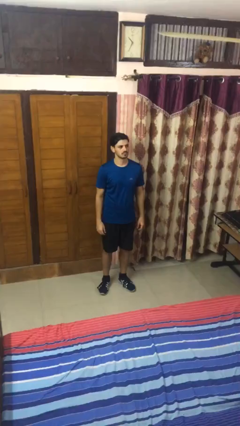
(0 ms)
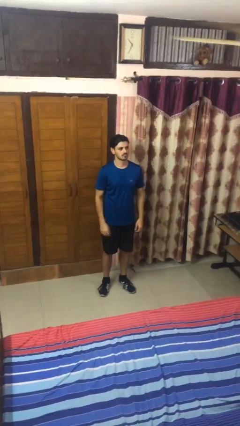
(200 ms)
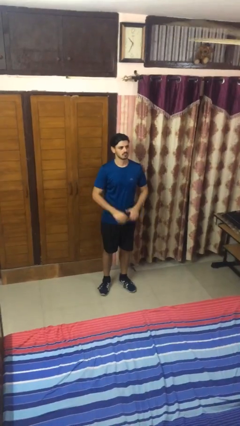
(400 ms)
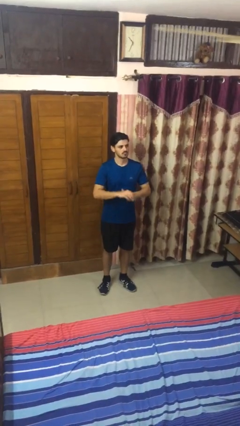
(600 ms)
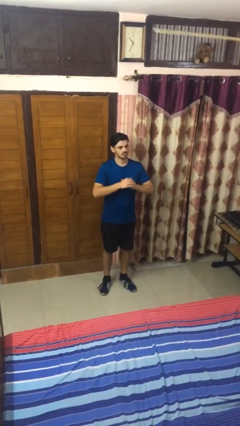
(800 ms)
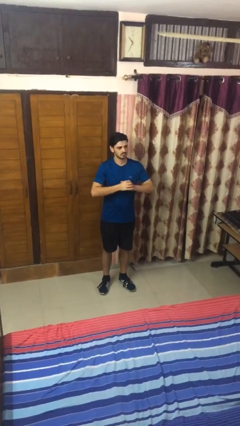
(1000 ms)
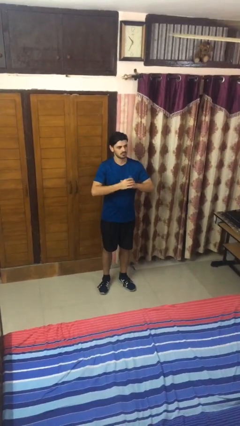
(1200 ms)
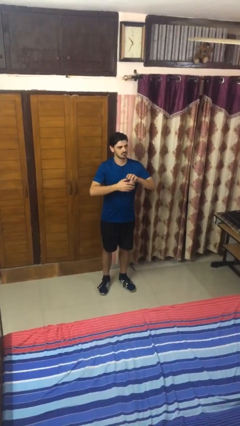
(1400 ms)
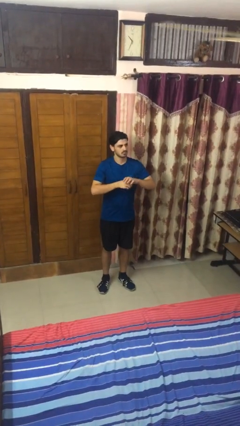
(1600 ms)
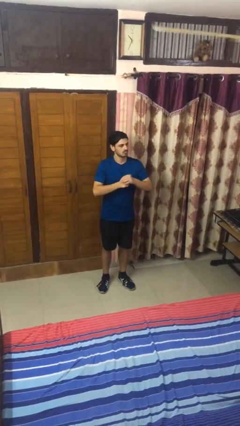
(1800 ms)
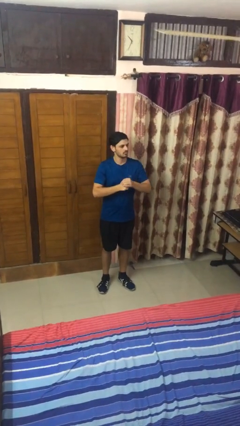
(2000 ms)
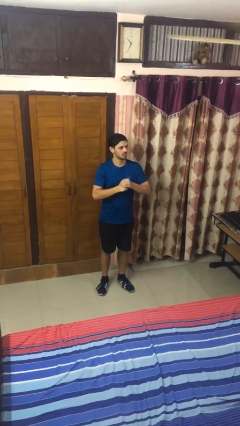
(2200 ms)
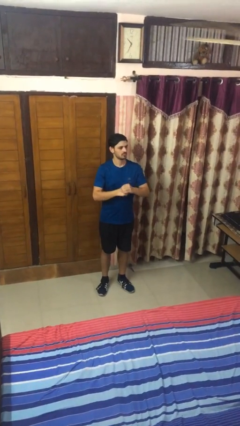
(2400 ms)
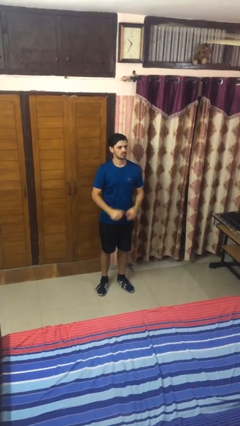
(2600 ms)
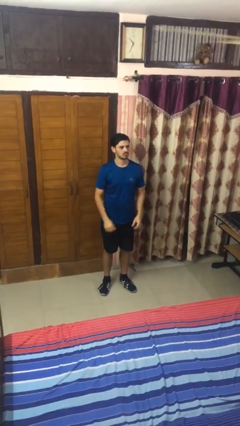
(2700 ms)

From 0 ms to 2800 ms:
person cracks knuckles

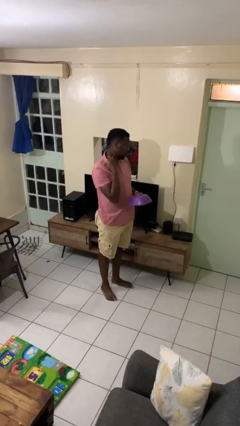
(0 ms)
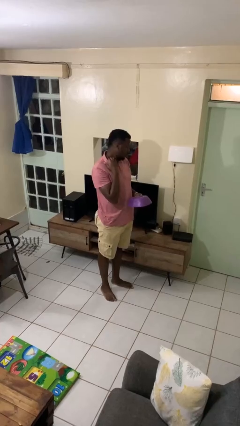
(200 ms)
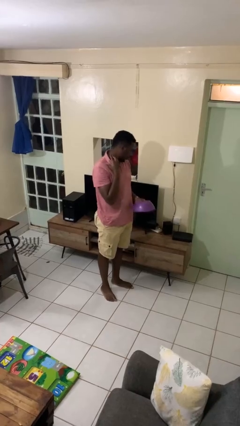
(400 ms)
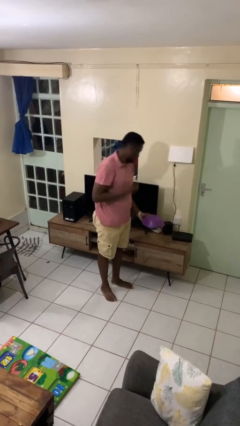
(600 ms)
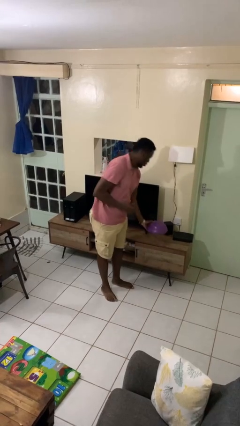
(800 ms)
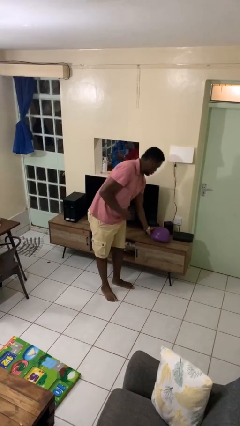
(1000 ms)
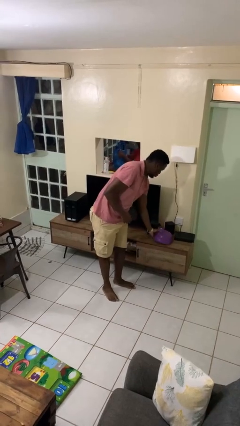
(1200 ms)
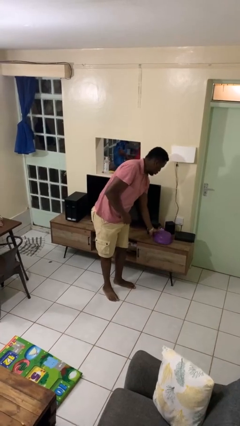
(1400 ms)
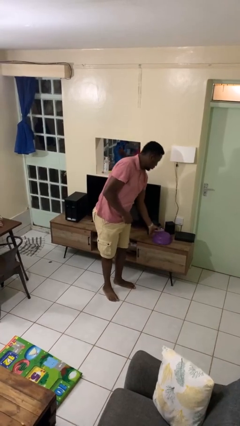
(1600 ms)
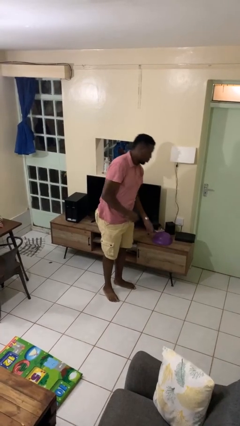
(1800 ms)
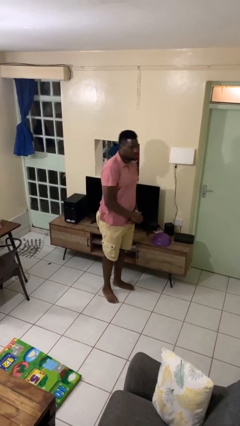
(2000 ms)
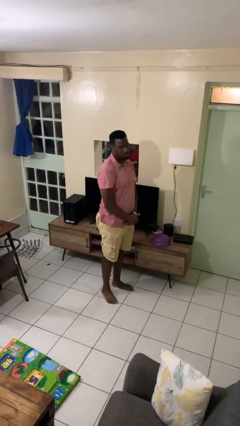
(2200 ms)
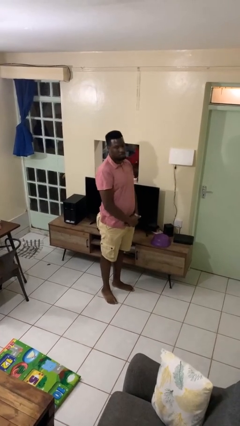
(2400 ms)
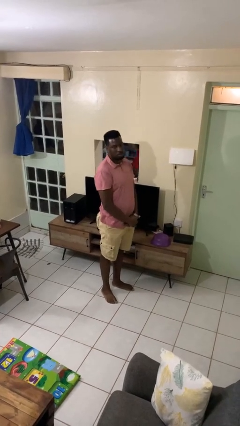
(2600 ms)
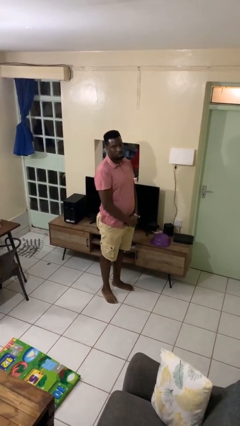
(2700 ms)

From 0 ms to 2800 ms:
person puts down object on countertop

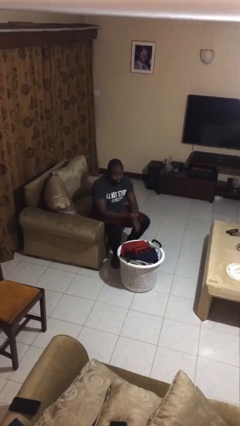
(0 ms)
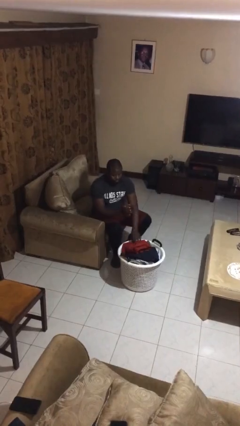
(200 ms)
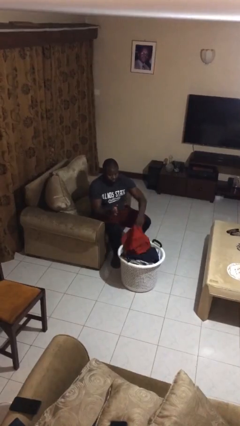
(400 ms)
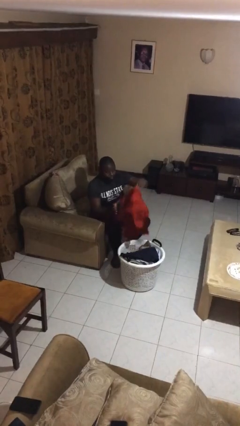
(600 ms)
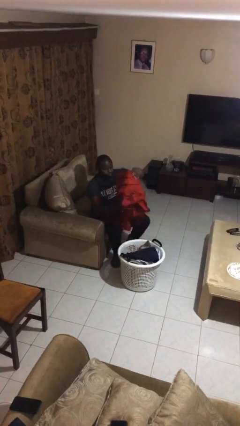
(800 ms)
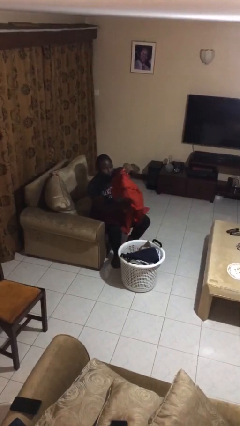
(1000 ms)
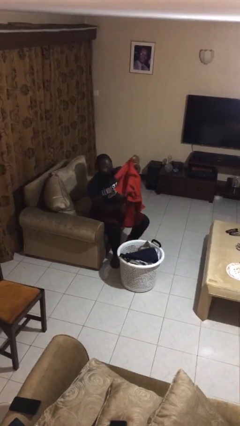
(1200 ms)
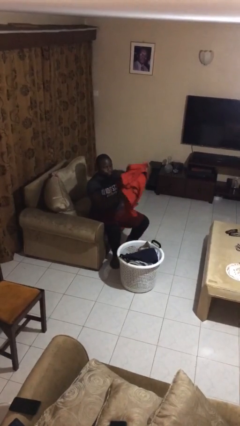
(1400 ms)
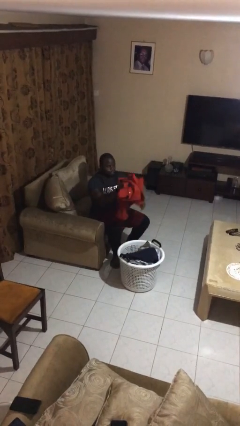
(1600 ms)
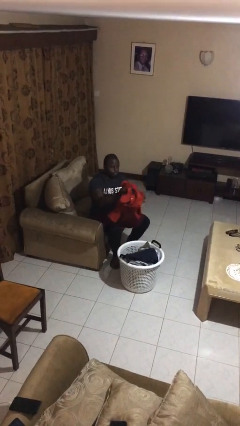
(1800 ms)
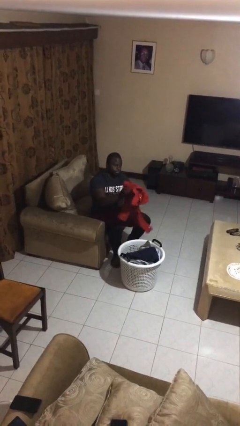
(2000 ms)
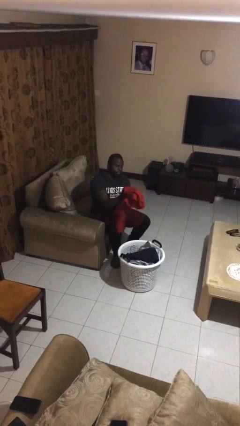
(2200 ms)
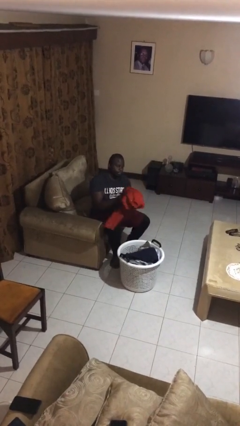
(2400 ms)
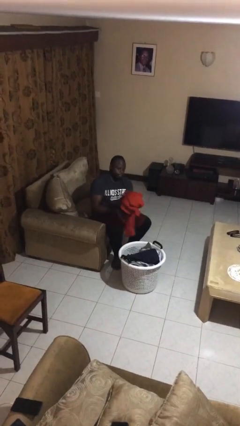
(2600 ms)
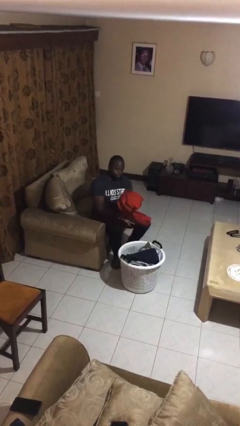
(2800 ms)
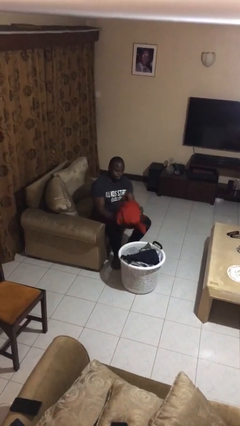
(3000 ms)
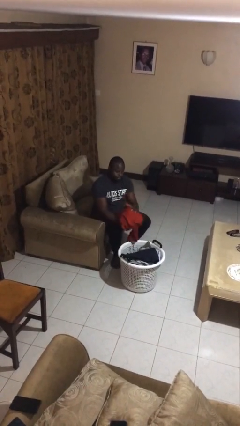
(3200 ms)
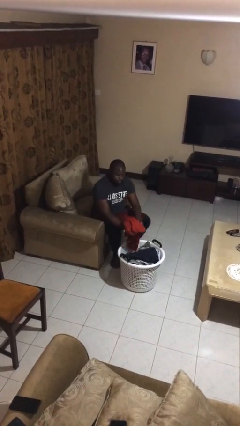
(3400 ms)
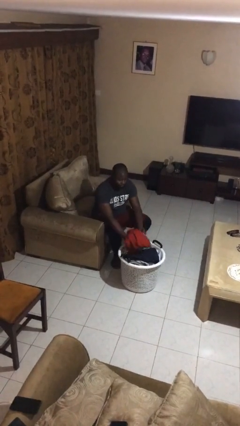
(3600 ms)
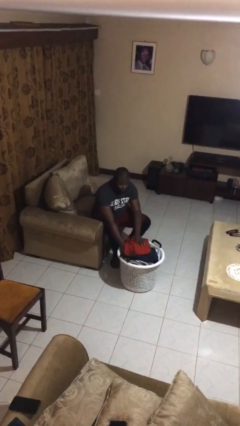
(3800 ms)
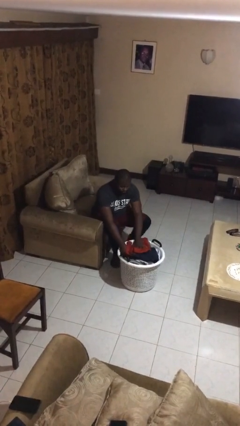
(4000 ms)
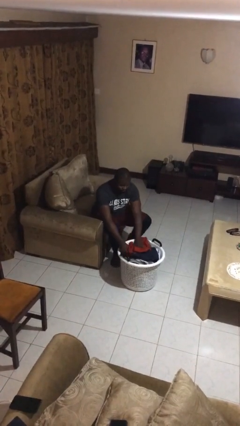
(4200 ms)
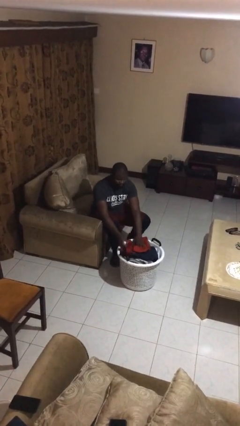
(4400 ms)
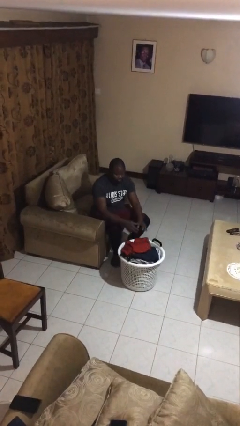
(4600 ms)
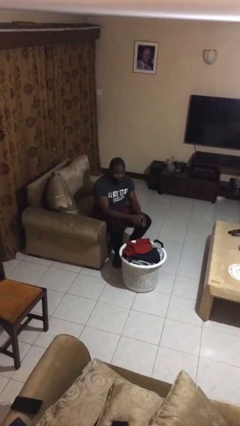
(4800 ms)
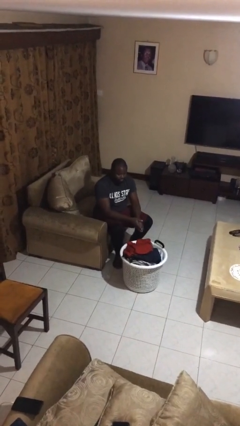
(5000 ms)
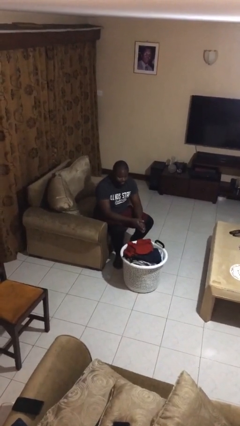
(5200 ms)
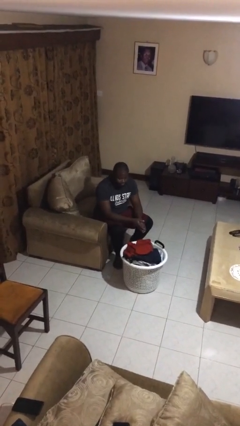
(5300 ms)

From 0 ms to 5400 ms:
person folds shirt

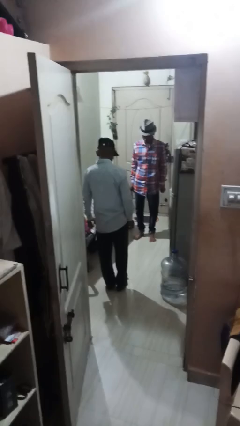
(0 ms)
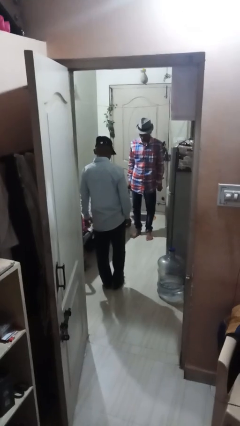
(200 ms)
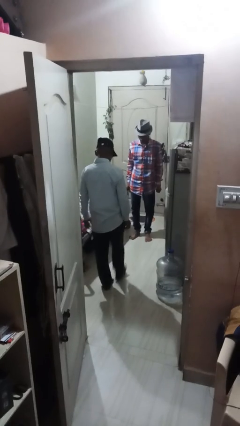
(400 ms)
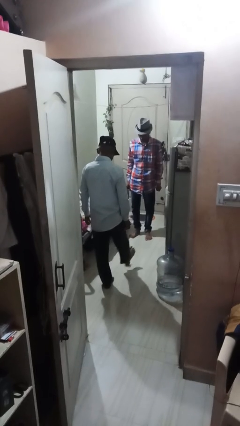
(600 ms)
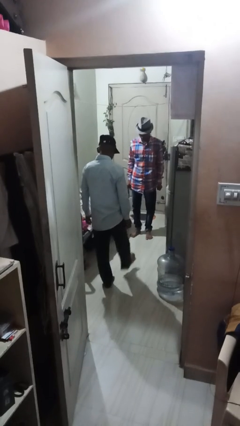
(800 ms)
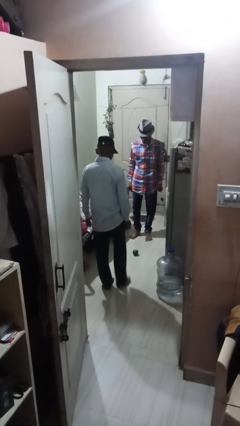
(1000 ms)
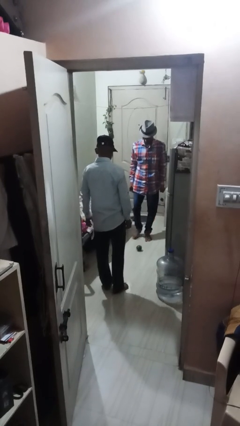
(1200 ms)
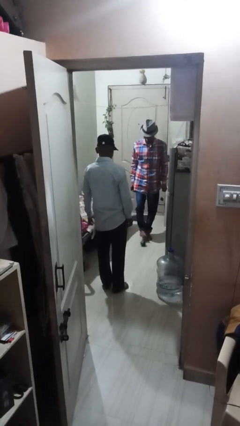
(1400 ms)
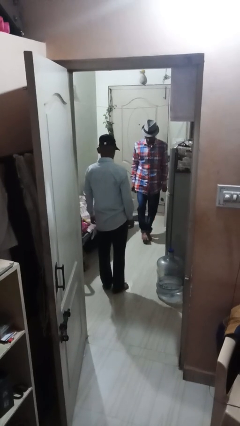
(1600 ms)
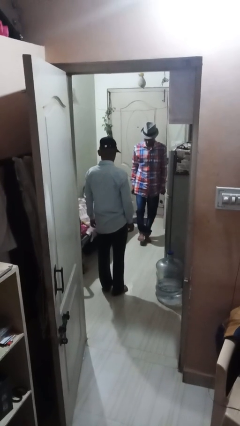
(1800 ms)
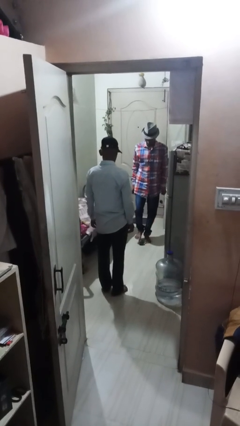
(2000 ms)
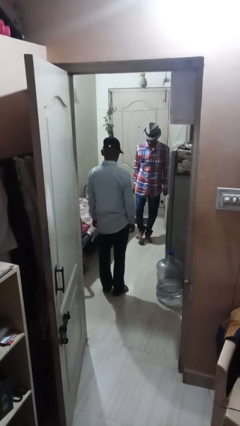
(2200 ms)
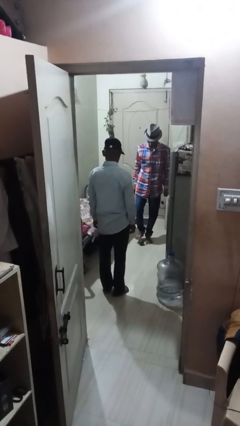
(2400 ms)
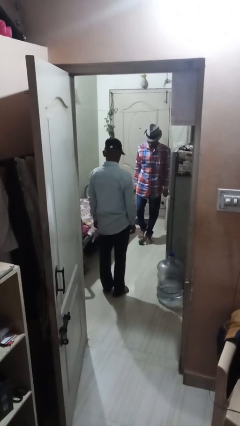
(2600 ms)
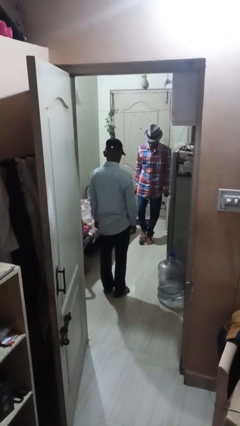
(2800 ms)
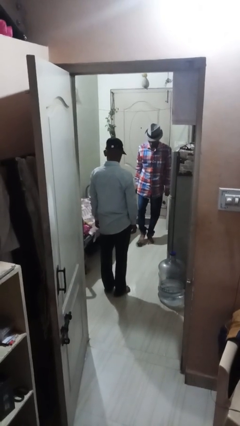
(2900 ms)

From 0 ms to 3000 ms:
person kicks object to person

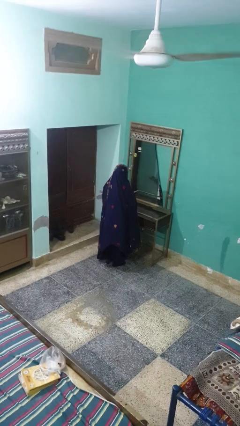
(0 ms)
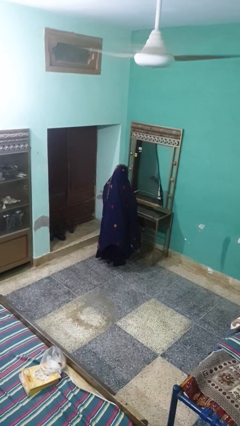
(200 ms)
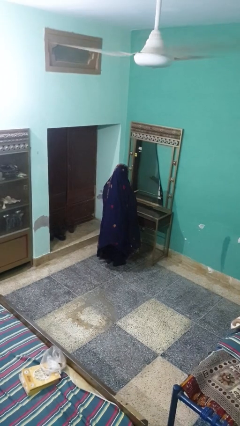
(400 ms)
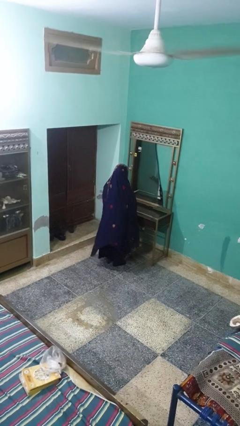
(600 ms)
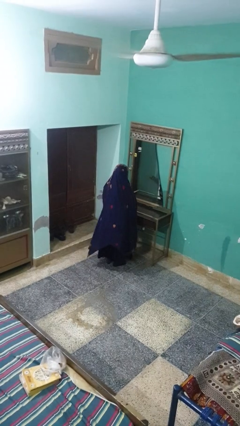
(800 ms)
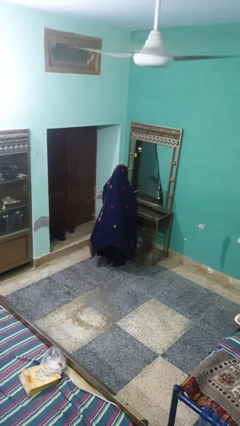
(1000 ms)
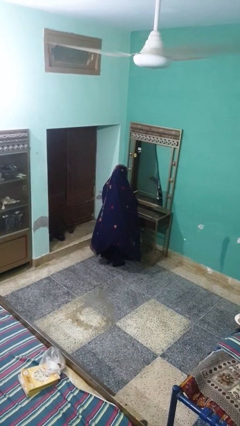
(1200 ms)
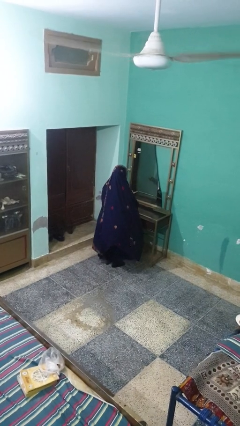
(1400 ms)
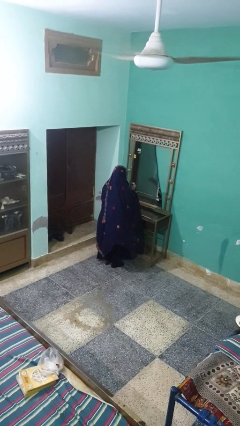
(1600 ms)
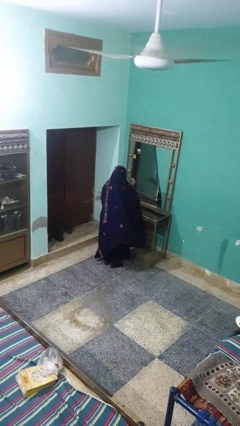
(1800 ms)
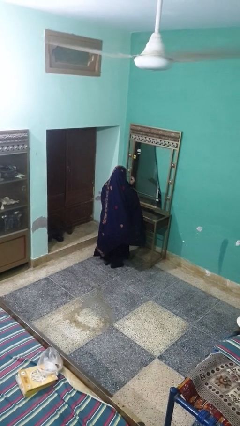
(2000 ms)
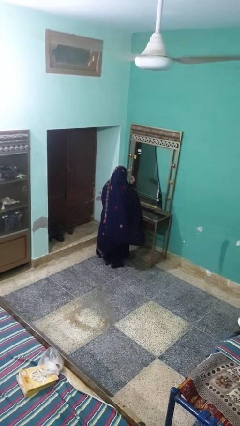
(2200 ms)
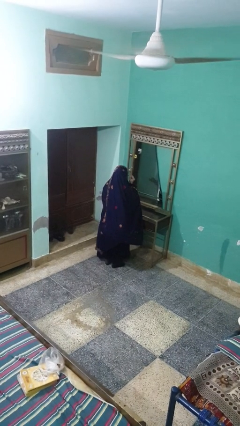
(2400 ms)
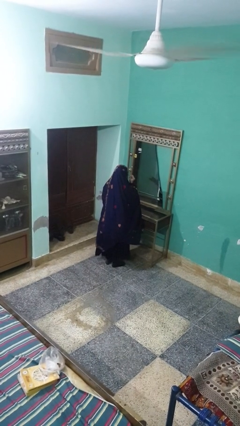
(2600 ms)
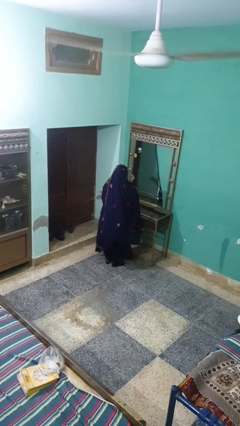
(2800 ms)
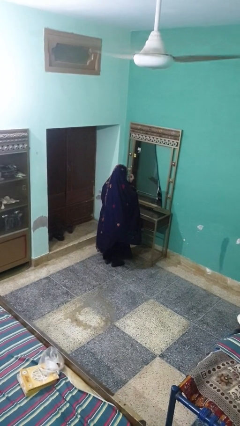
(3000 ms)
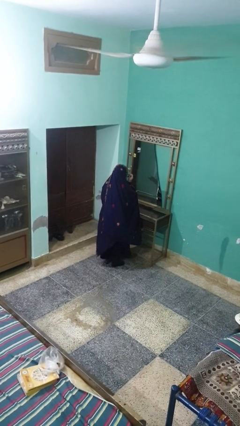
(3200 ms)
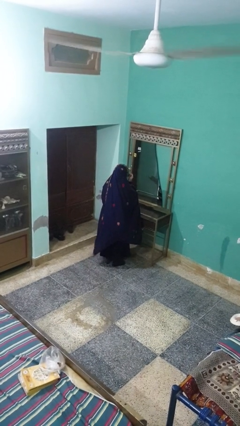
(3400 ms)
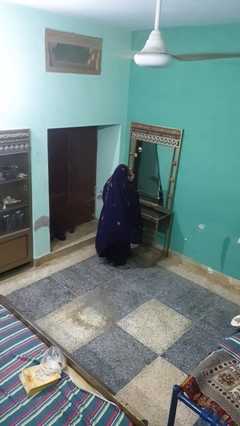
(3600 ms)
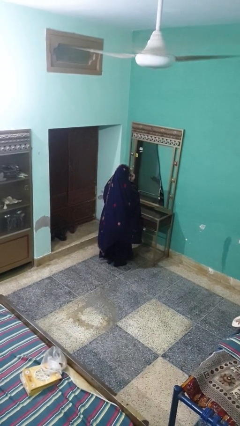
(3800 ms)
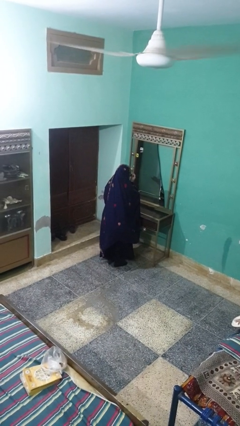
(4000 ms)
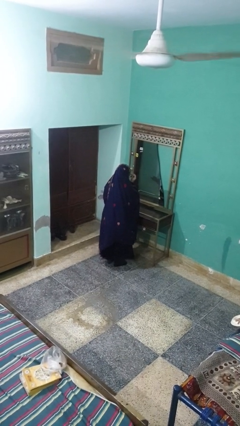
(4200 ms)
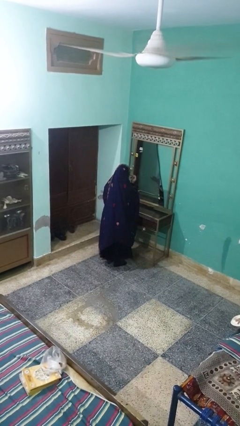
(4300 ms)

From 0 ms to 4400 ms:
person applies eye makeup
